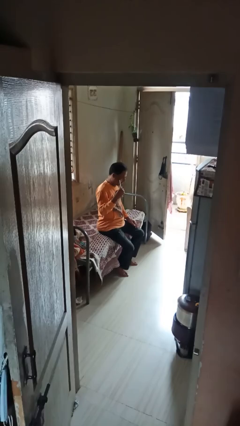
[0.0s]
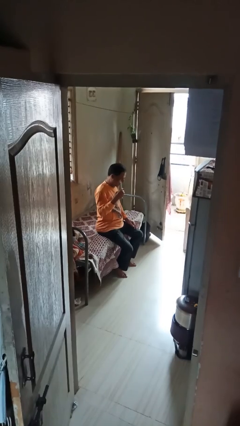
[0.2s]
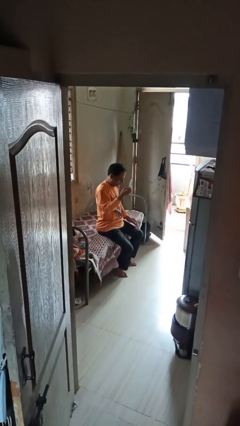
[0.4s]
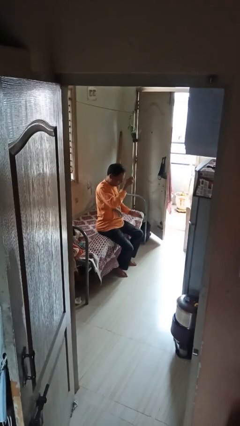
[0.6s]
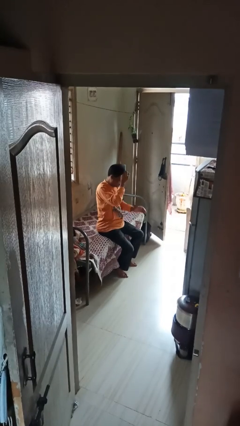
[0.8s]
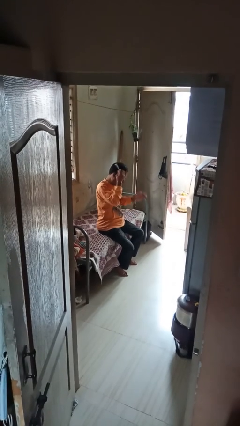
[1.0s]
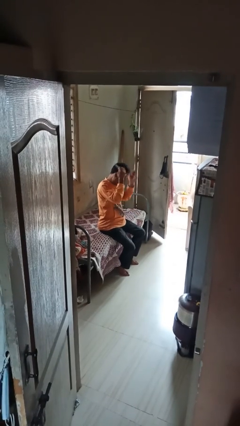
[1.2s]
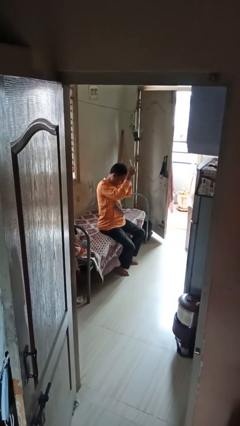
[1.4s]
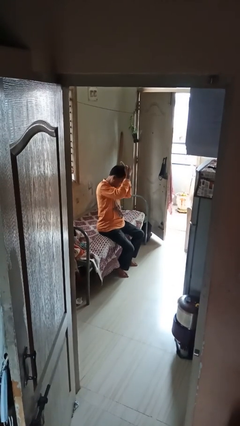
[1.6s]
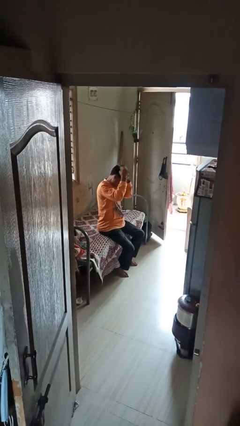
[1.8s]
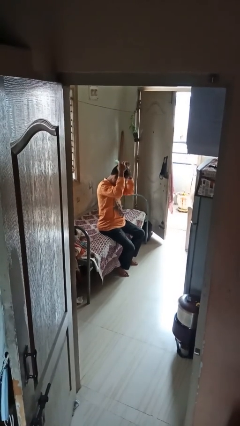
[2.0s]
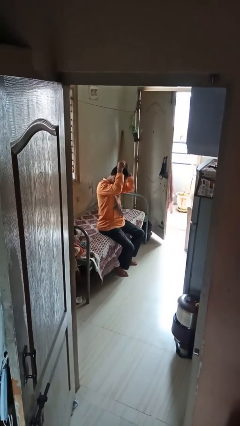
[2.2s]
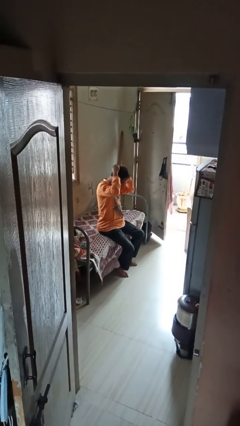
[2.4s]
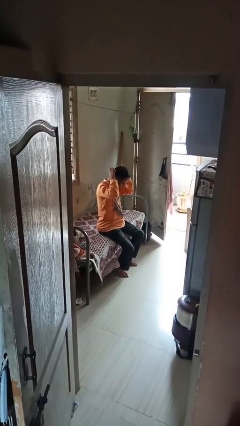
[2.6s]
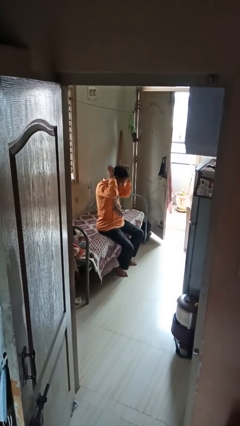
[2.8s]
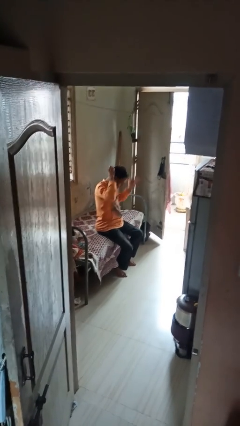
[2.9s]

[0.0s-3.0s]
person brushes hair

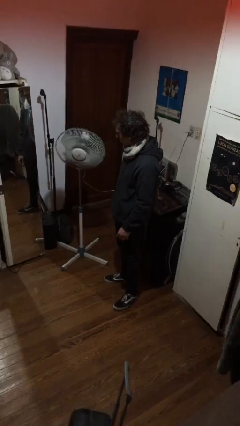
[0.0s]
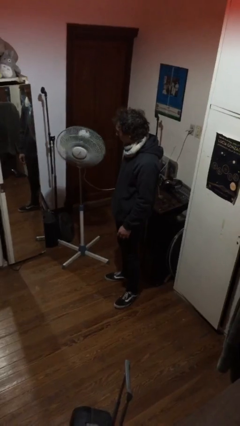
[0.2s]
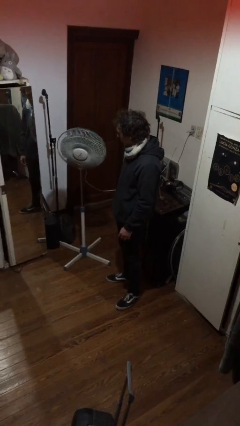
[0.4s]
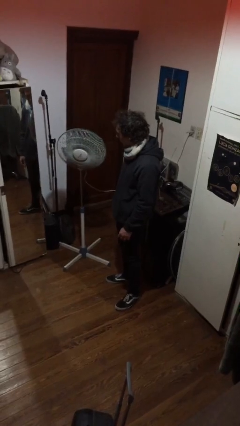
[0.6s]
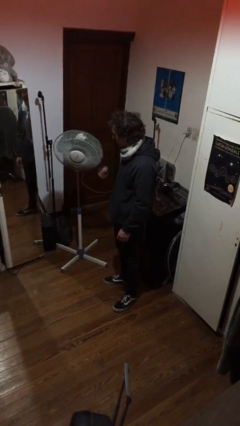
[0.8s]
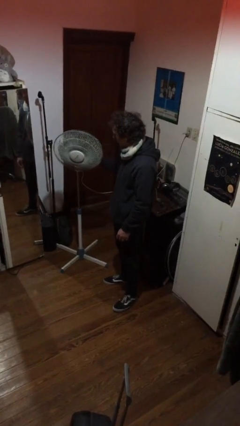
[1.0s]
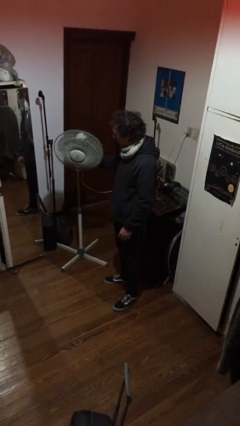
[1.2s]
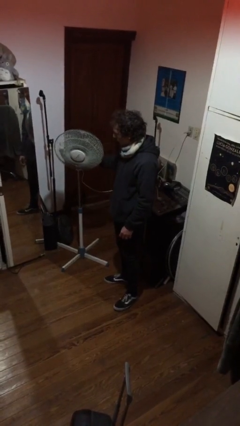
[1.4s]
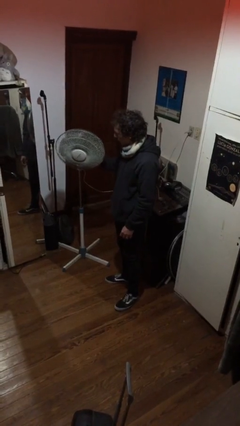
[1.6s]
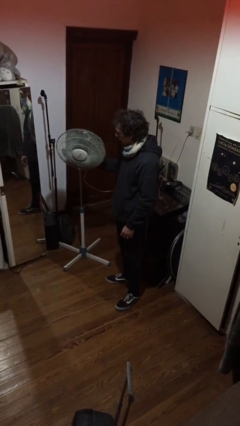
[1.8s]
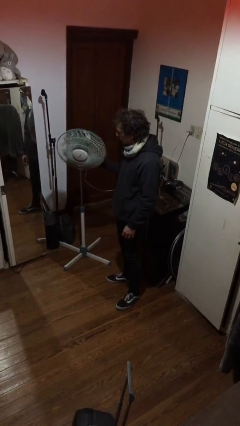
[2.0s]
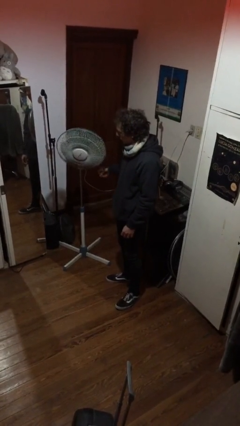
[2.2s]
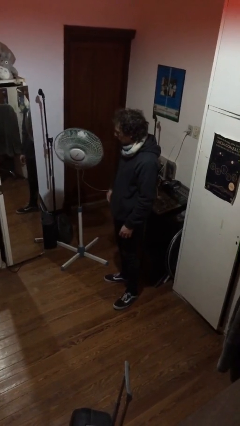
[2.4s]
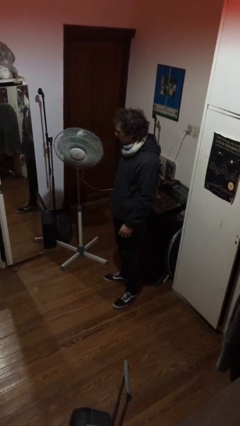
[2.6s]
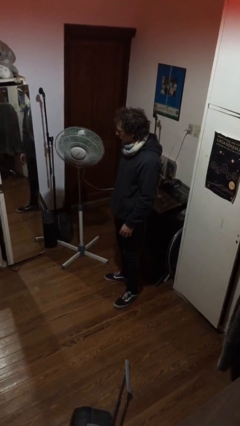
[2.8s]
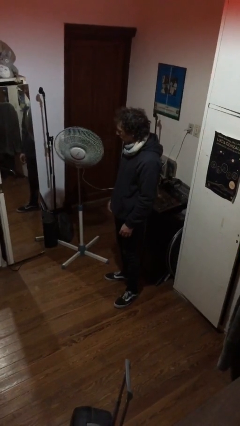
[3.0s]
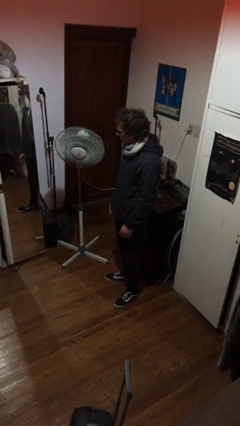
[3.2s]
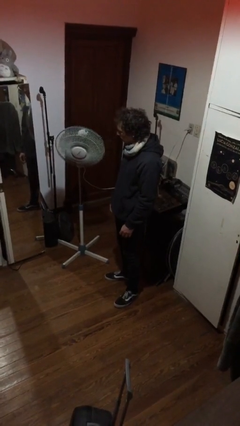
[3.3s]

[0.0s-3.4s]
person turns on fan

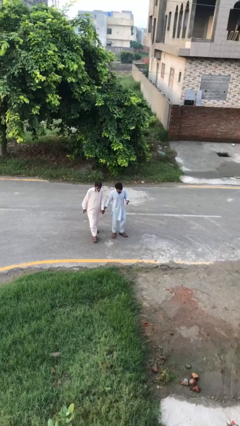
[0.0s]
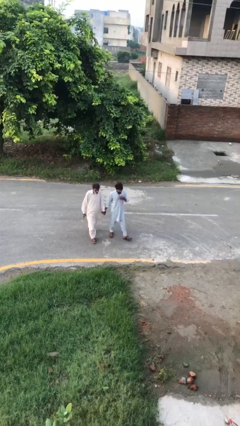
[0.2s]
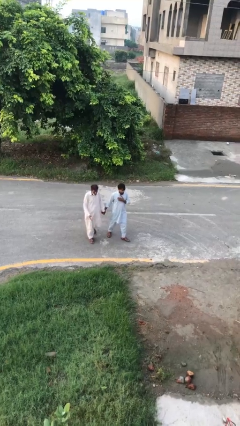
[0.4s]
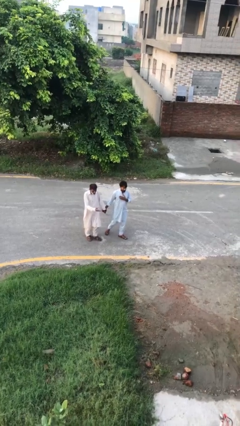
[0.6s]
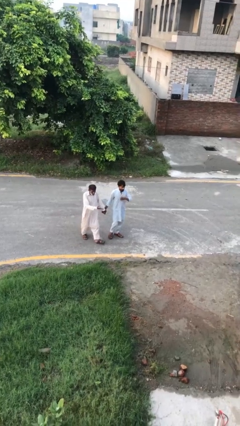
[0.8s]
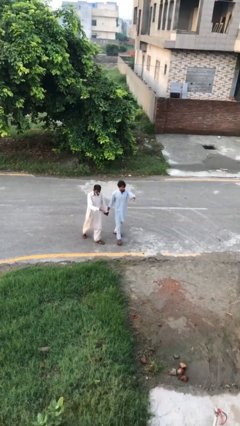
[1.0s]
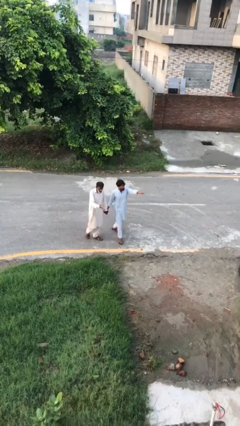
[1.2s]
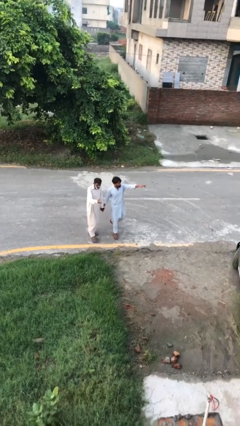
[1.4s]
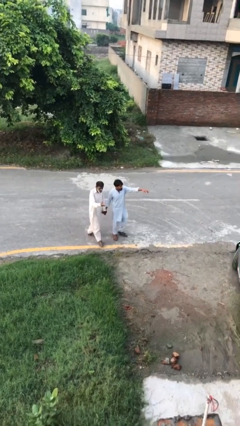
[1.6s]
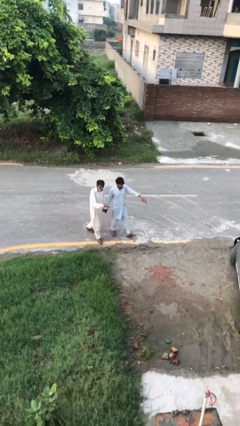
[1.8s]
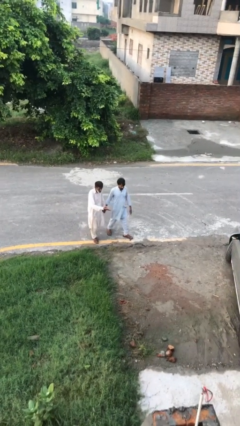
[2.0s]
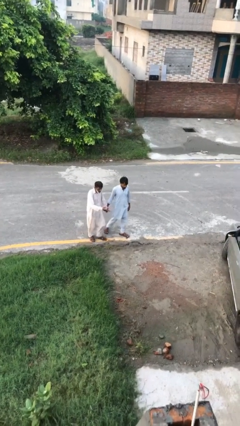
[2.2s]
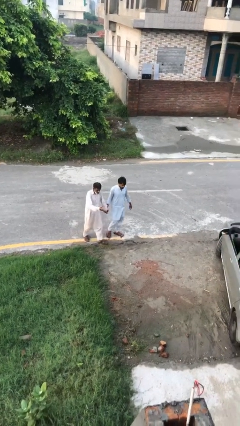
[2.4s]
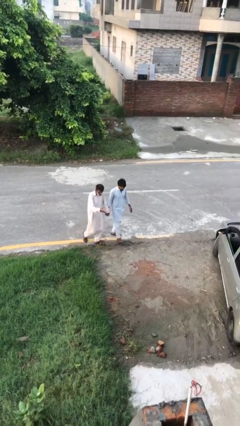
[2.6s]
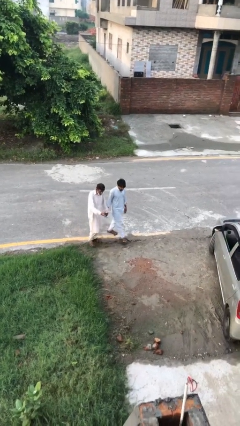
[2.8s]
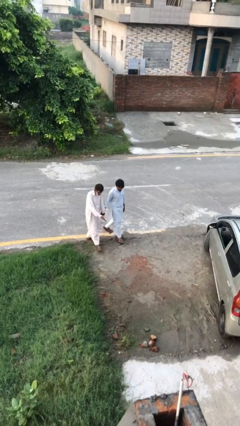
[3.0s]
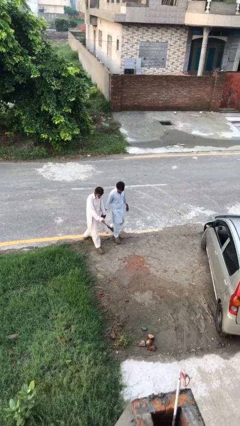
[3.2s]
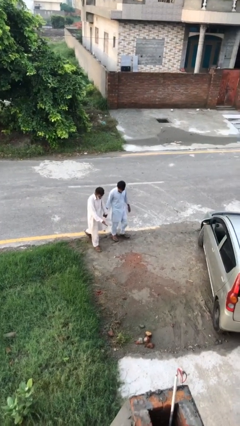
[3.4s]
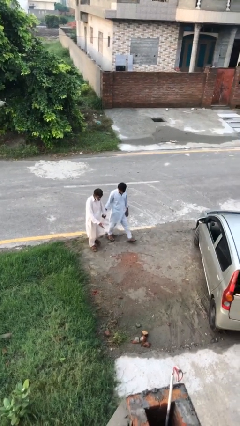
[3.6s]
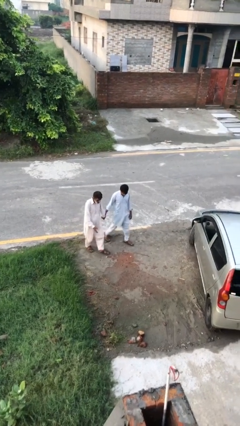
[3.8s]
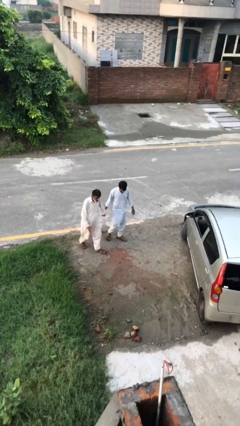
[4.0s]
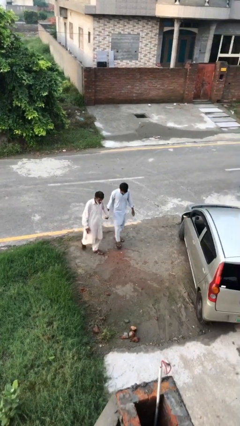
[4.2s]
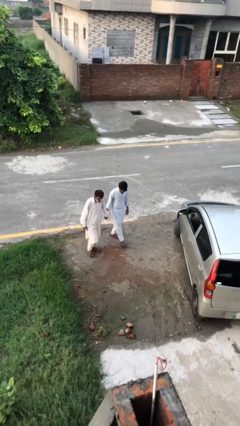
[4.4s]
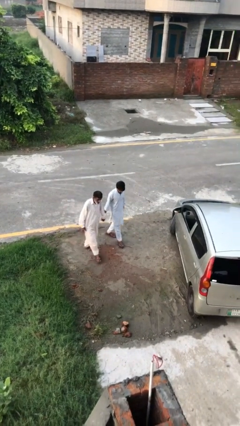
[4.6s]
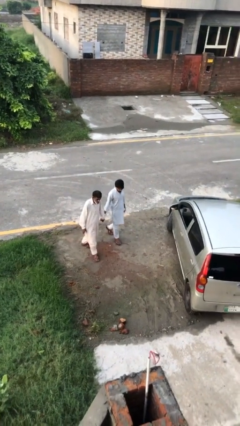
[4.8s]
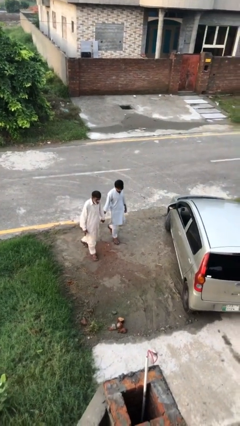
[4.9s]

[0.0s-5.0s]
person holds hand

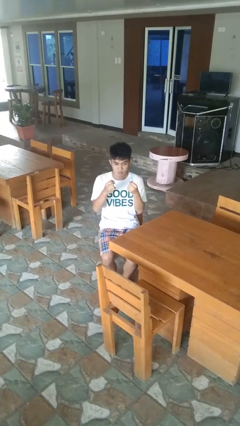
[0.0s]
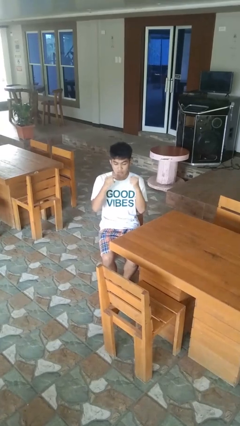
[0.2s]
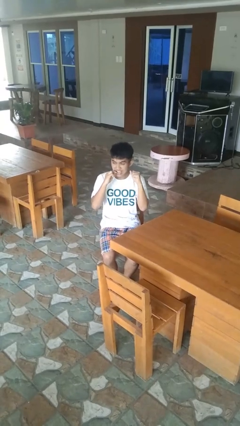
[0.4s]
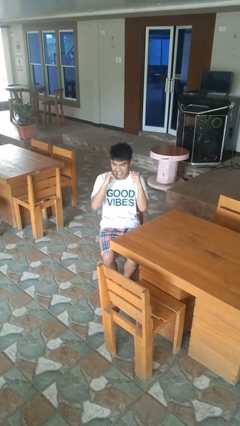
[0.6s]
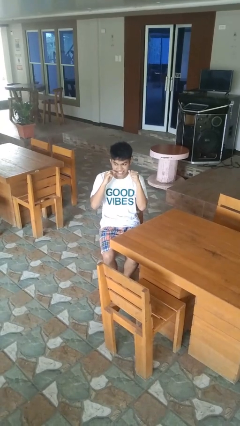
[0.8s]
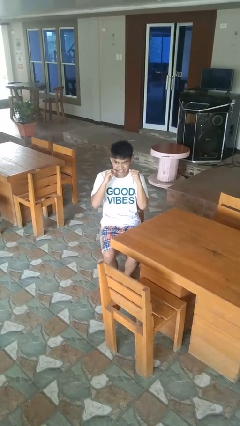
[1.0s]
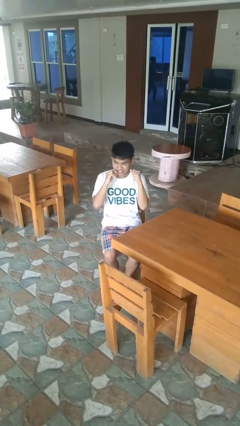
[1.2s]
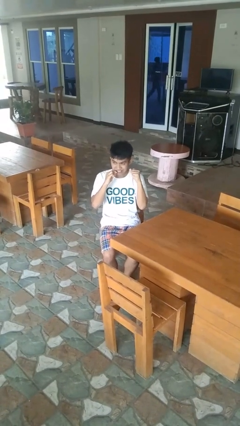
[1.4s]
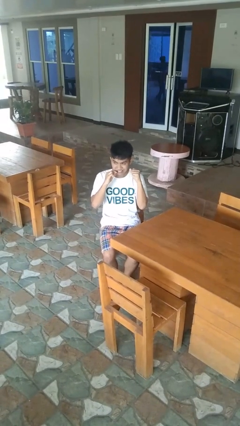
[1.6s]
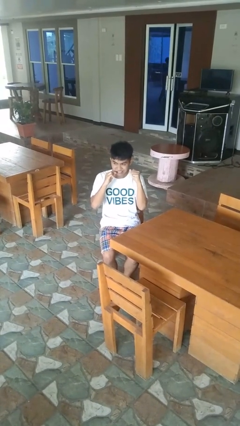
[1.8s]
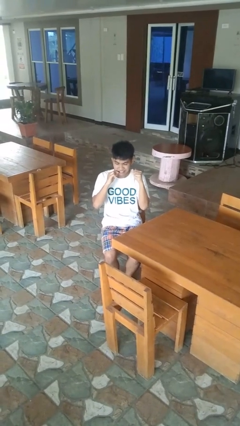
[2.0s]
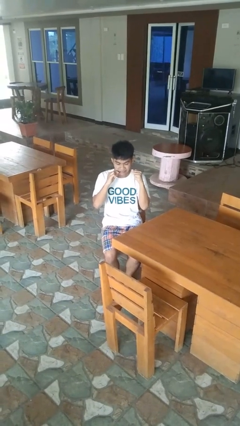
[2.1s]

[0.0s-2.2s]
person flosses

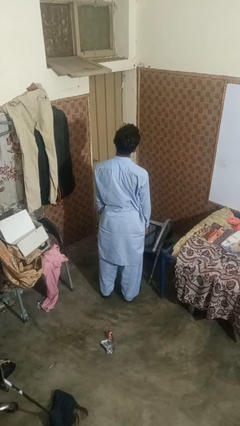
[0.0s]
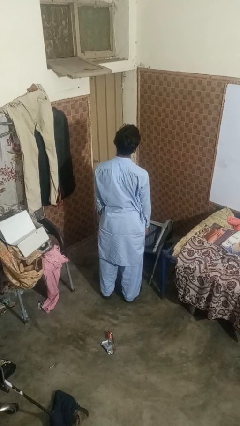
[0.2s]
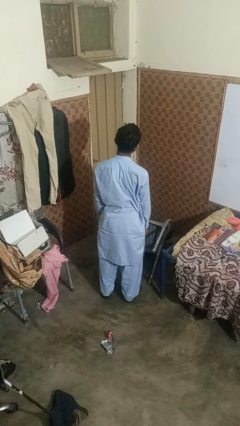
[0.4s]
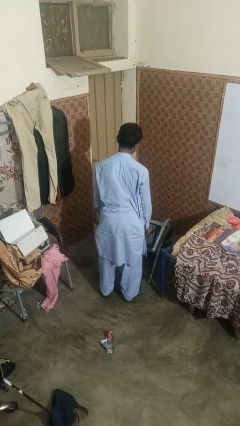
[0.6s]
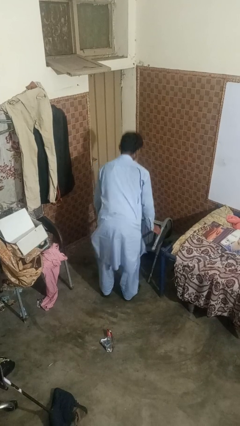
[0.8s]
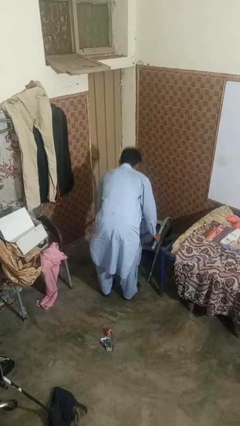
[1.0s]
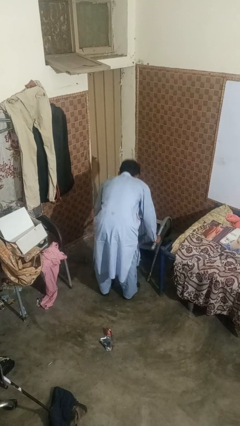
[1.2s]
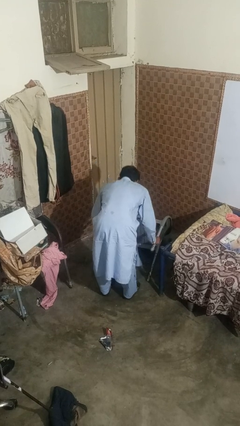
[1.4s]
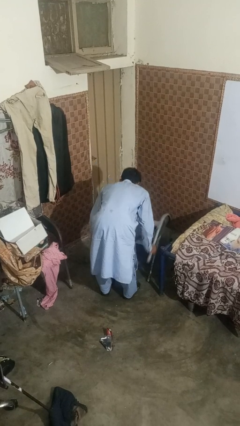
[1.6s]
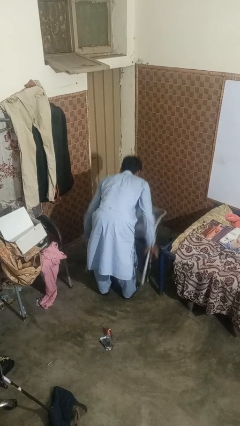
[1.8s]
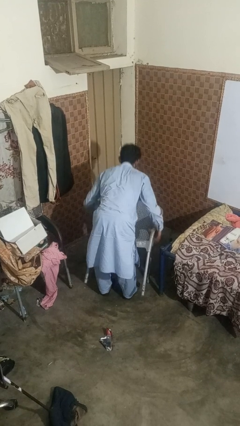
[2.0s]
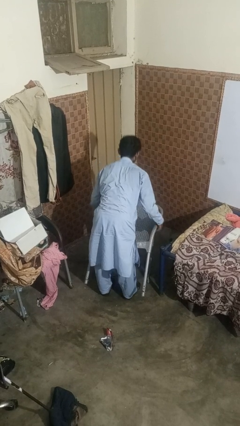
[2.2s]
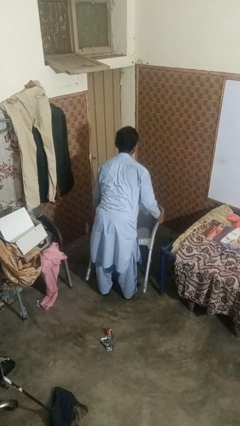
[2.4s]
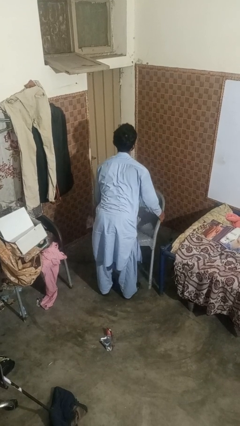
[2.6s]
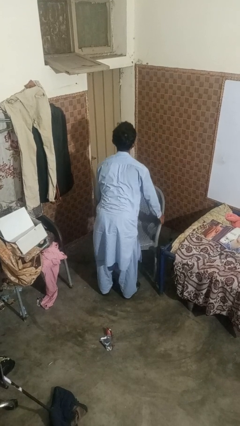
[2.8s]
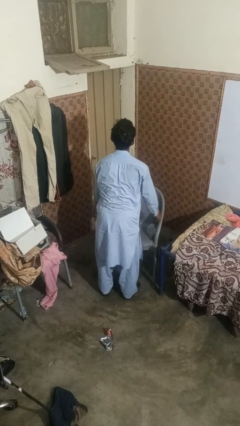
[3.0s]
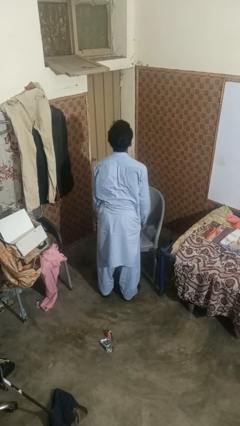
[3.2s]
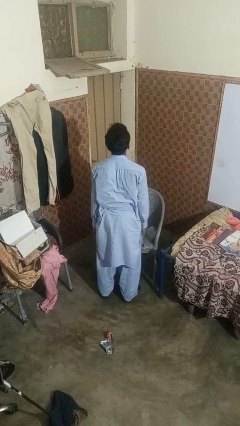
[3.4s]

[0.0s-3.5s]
person sets upright furniture
